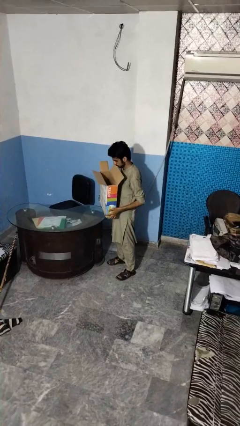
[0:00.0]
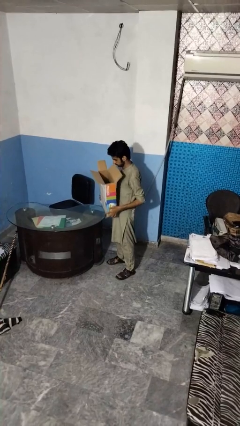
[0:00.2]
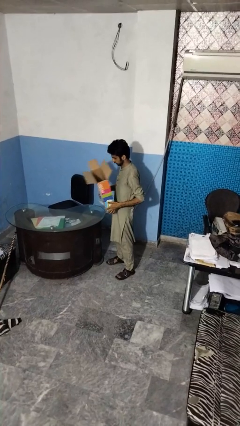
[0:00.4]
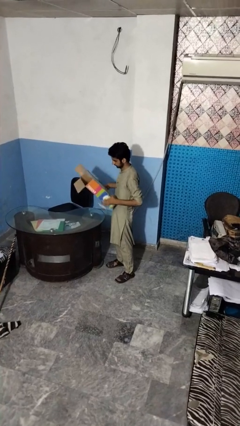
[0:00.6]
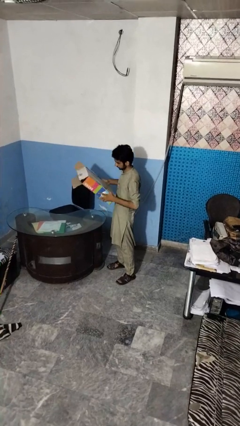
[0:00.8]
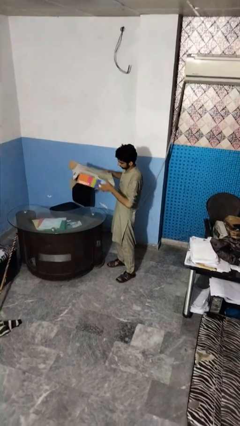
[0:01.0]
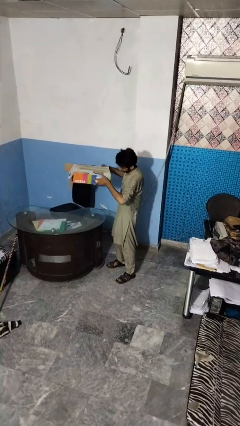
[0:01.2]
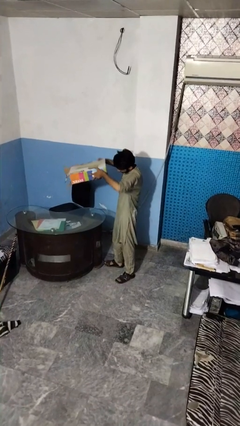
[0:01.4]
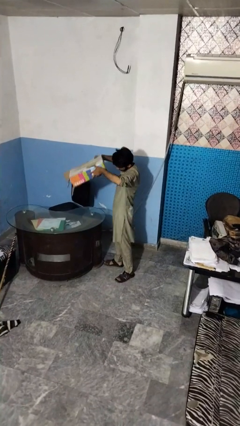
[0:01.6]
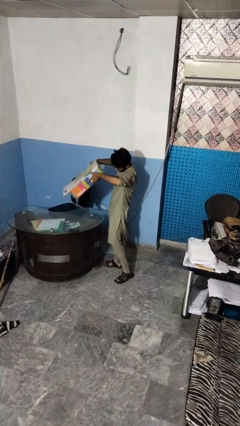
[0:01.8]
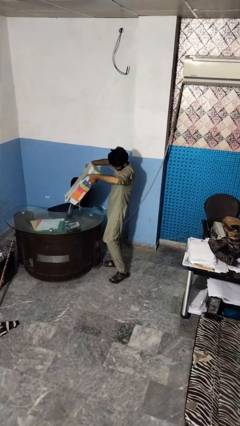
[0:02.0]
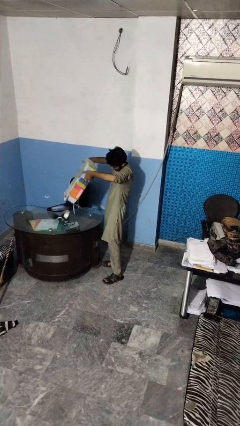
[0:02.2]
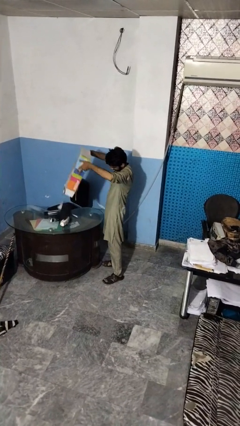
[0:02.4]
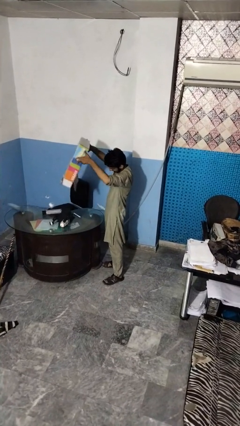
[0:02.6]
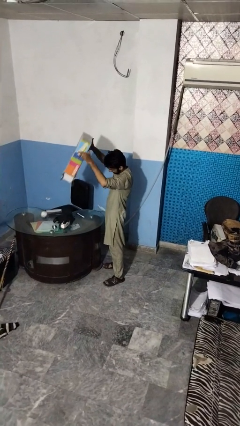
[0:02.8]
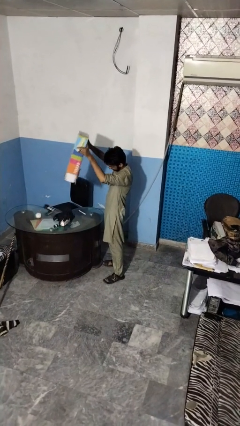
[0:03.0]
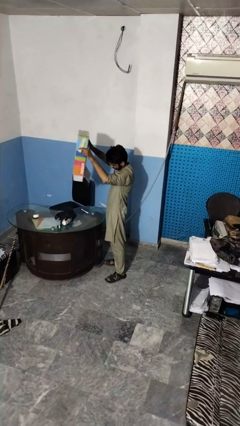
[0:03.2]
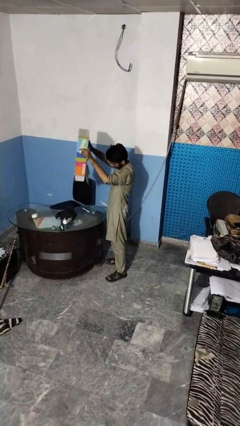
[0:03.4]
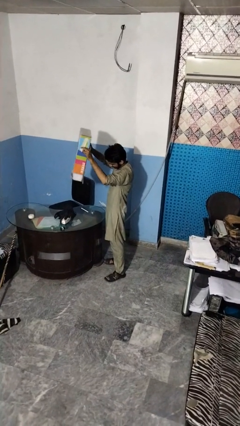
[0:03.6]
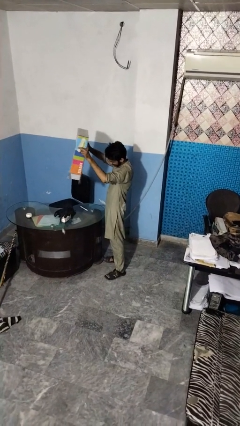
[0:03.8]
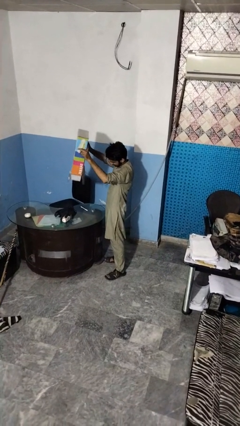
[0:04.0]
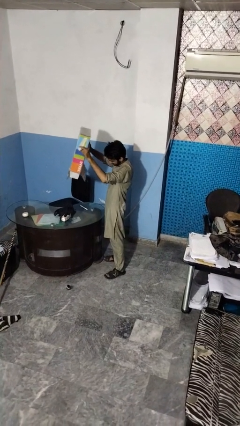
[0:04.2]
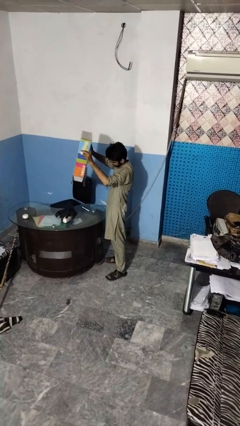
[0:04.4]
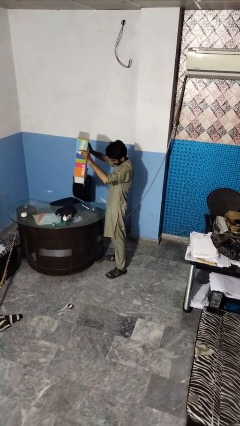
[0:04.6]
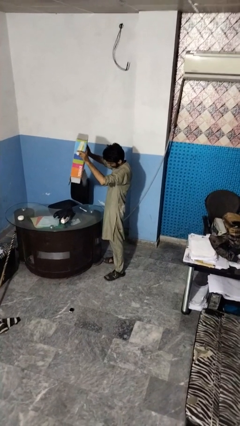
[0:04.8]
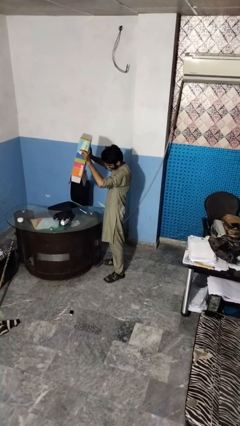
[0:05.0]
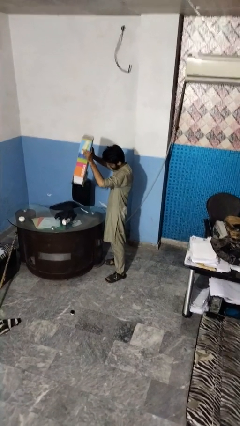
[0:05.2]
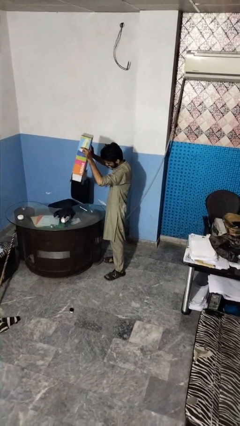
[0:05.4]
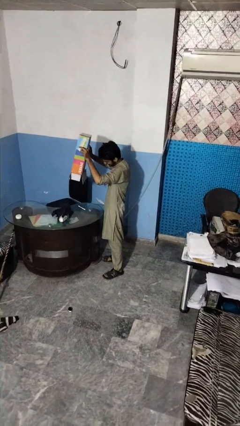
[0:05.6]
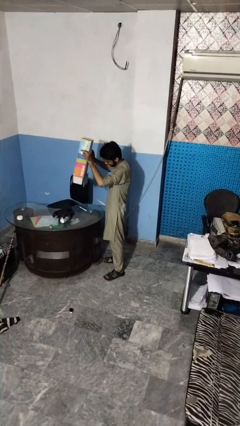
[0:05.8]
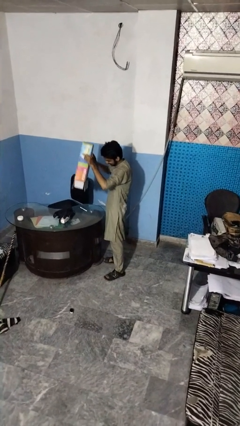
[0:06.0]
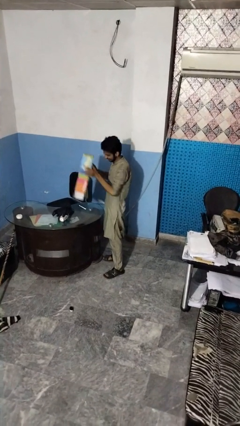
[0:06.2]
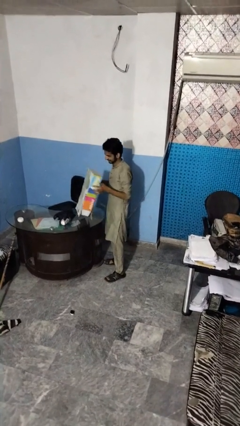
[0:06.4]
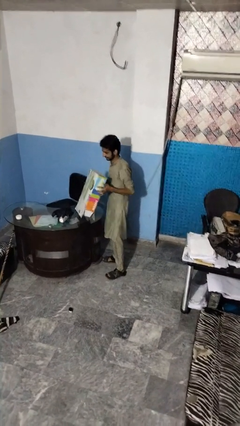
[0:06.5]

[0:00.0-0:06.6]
person unloads box onto table

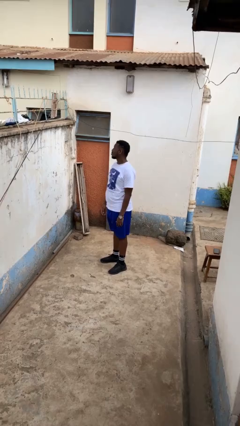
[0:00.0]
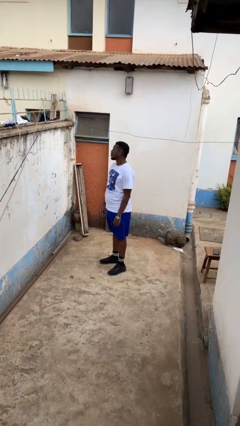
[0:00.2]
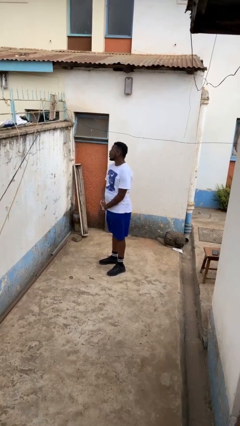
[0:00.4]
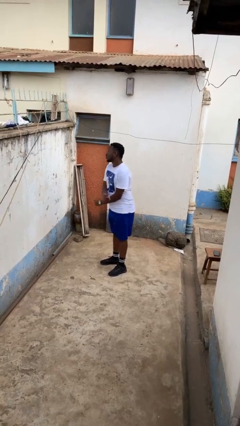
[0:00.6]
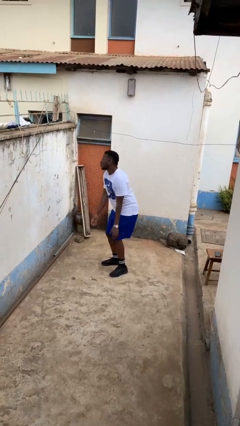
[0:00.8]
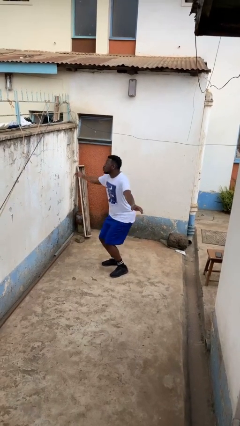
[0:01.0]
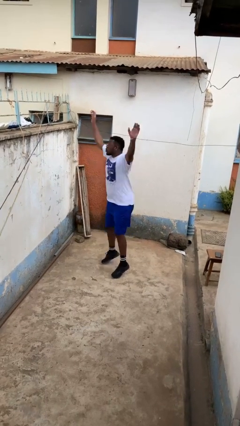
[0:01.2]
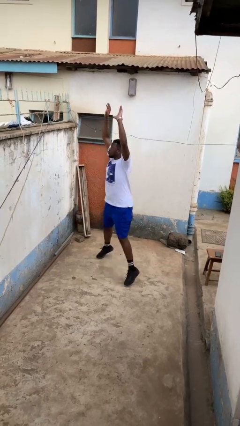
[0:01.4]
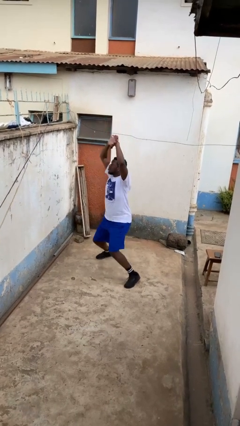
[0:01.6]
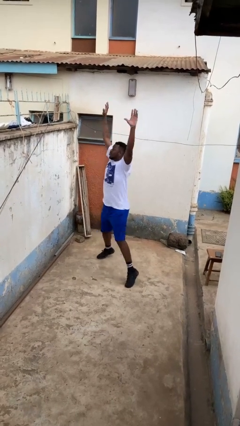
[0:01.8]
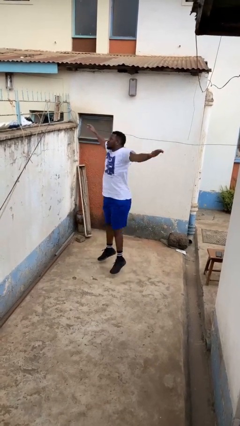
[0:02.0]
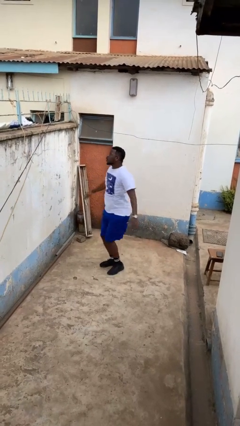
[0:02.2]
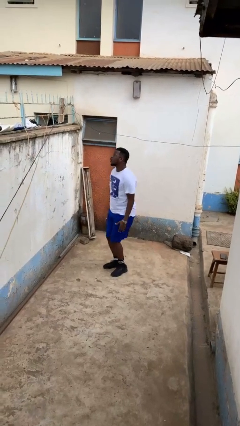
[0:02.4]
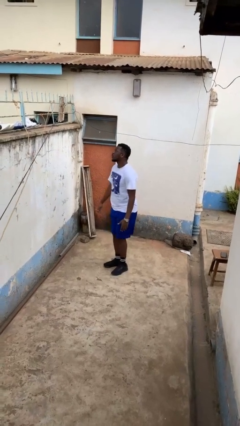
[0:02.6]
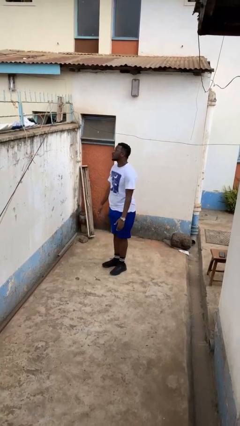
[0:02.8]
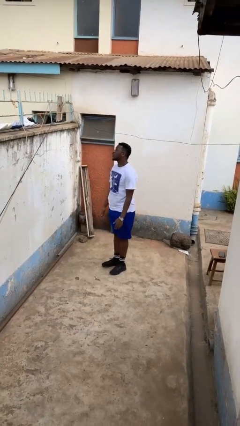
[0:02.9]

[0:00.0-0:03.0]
person exercises with jumping jacks

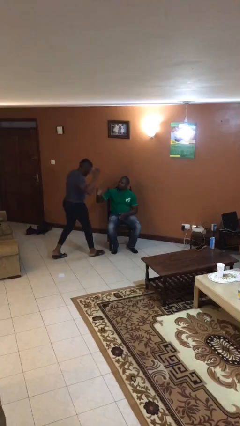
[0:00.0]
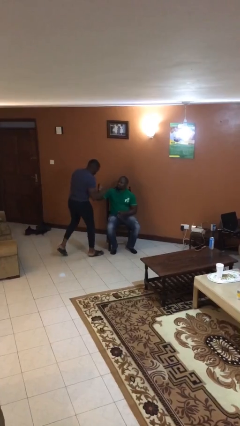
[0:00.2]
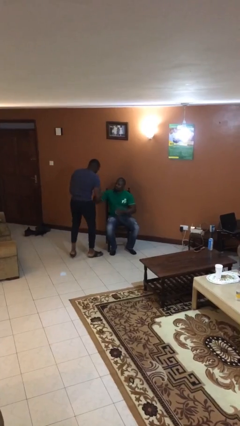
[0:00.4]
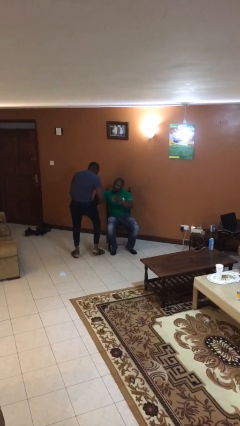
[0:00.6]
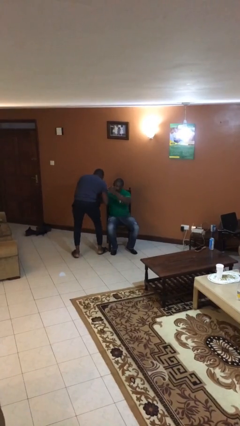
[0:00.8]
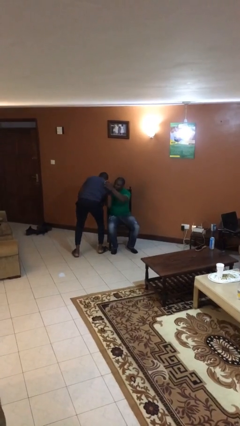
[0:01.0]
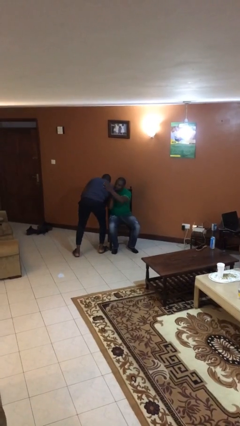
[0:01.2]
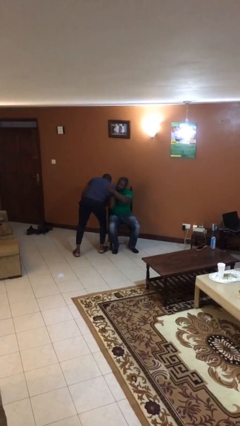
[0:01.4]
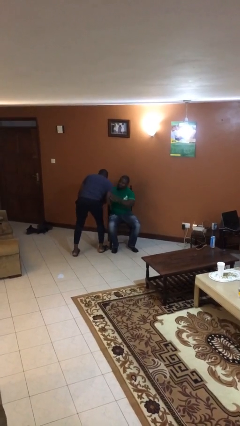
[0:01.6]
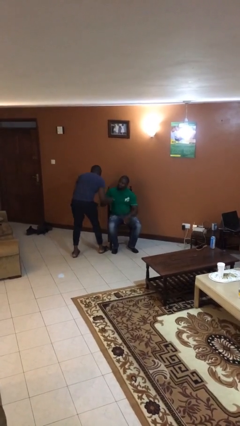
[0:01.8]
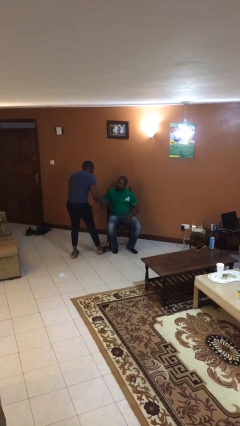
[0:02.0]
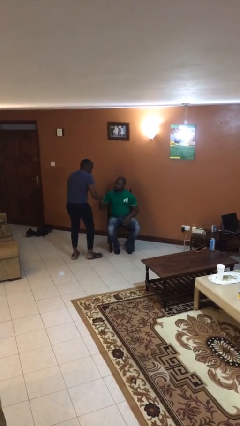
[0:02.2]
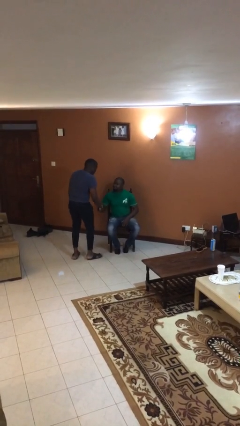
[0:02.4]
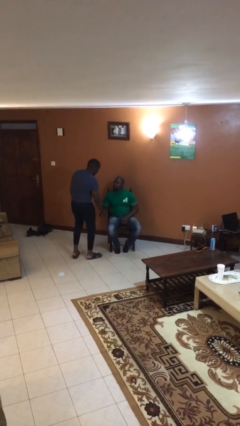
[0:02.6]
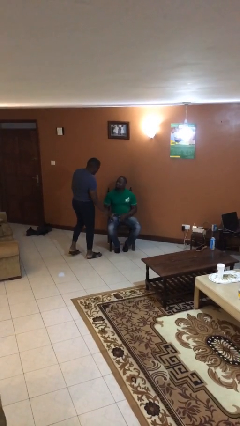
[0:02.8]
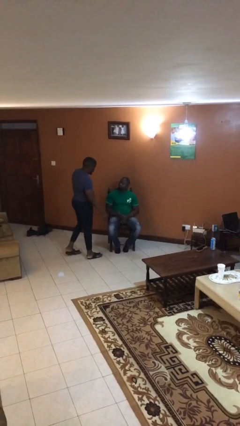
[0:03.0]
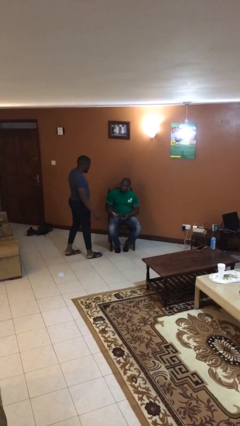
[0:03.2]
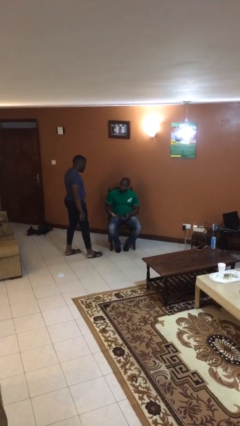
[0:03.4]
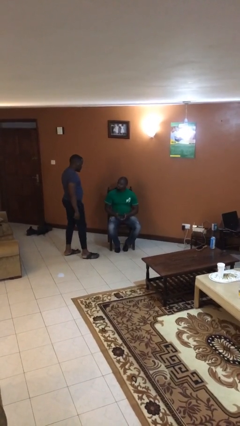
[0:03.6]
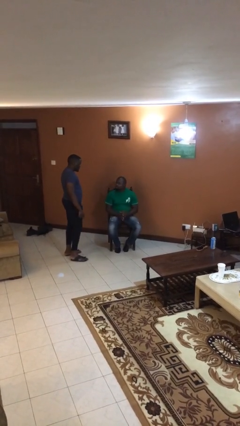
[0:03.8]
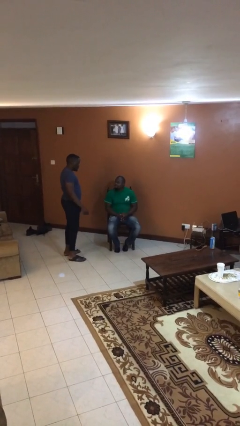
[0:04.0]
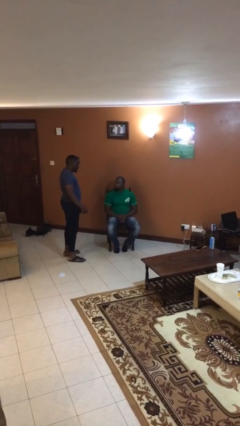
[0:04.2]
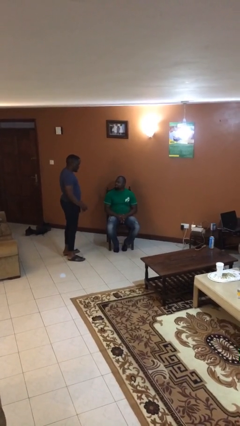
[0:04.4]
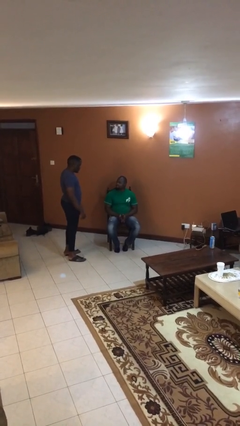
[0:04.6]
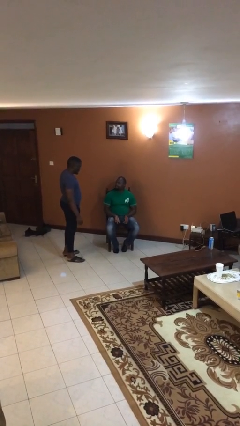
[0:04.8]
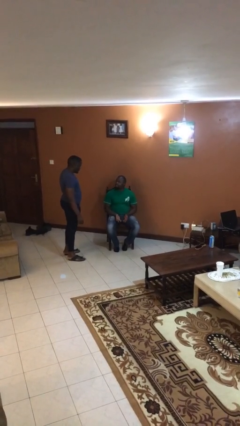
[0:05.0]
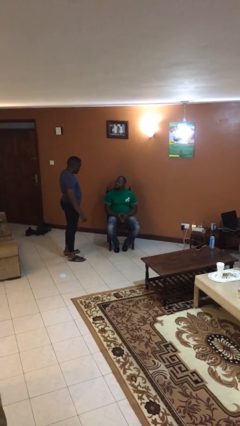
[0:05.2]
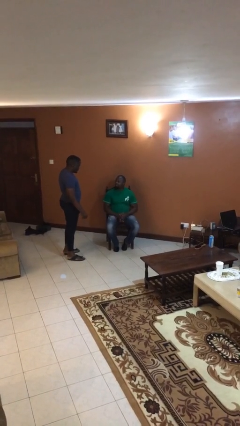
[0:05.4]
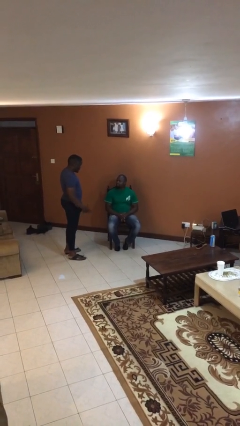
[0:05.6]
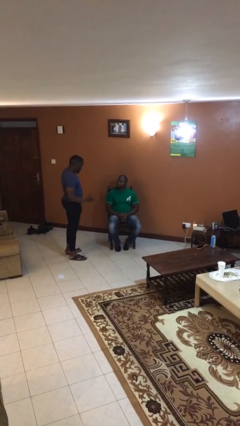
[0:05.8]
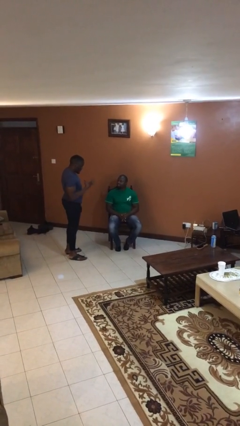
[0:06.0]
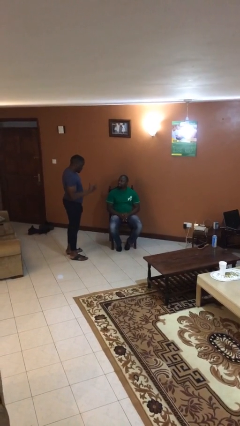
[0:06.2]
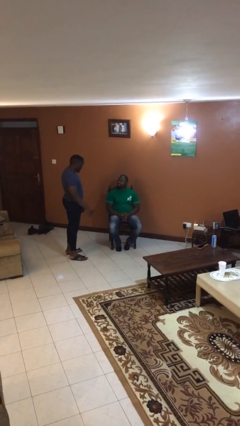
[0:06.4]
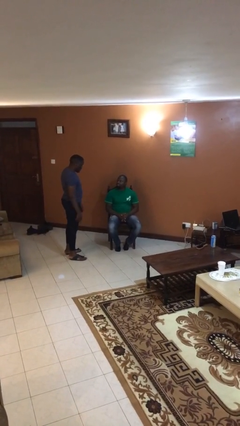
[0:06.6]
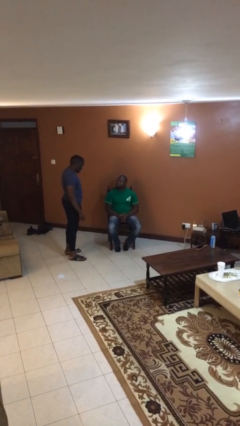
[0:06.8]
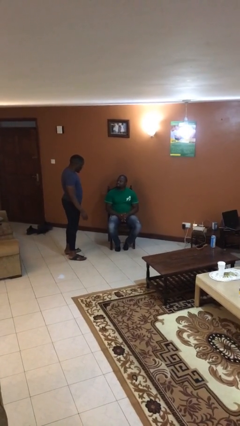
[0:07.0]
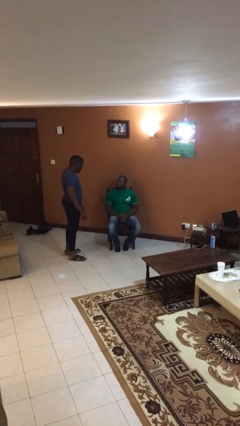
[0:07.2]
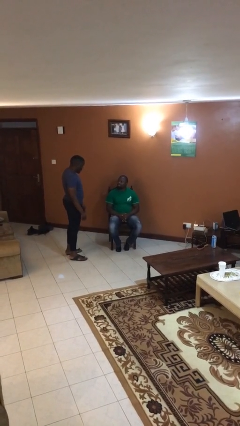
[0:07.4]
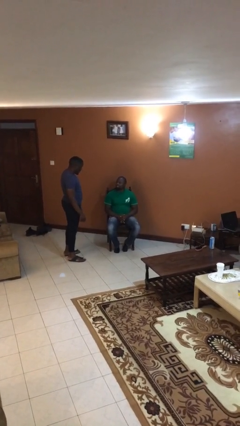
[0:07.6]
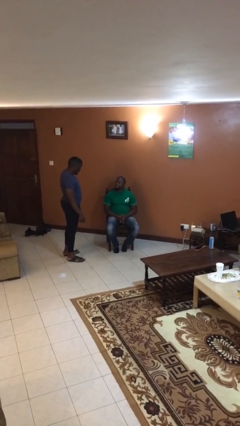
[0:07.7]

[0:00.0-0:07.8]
person embraces person

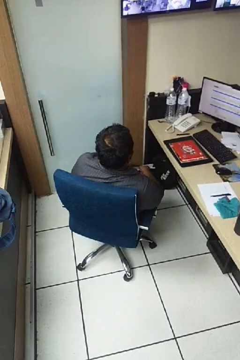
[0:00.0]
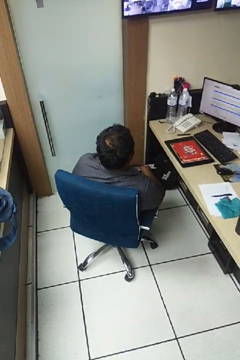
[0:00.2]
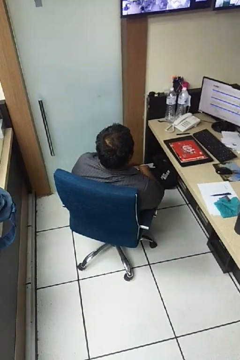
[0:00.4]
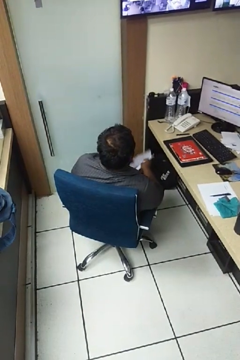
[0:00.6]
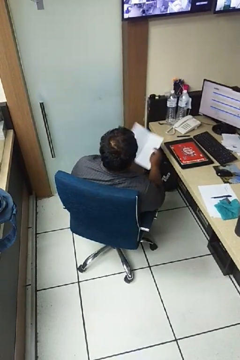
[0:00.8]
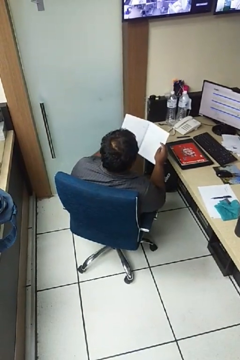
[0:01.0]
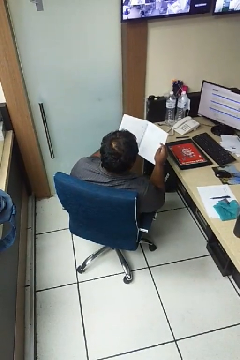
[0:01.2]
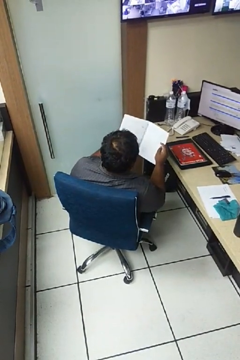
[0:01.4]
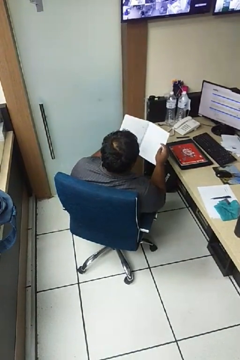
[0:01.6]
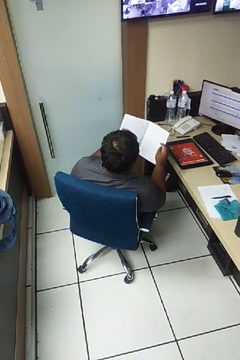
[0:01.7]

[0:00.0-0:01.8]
person reads book
